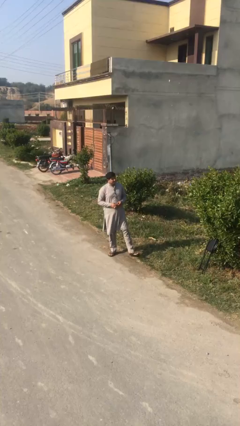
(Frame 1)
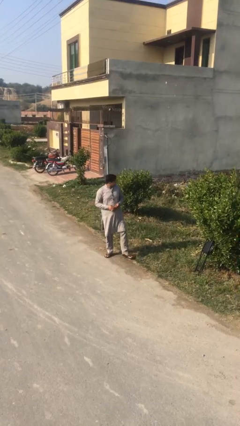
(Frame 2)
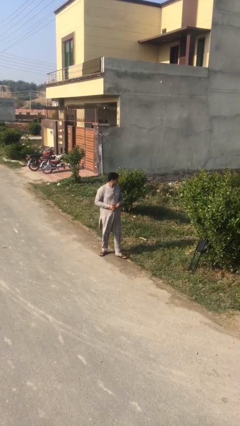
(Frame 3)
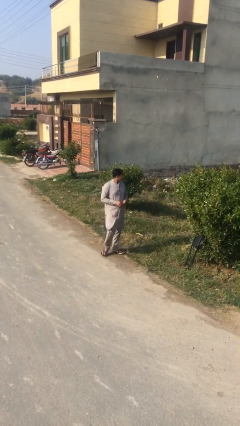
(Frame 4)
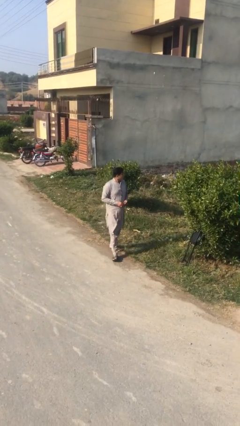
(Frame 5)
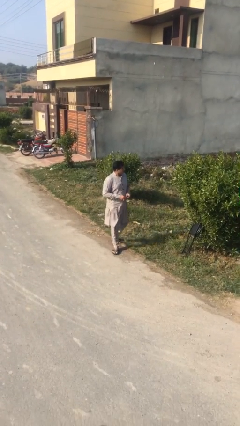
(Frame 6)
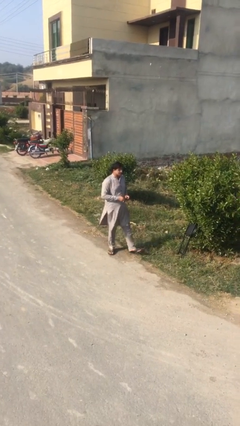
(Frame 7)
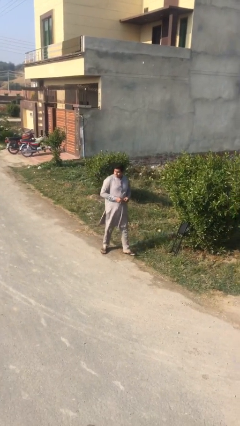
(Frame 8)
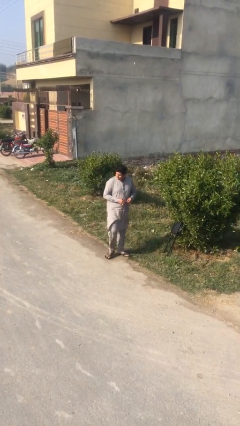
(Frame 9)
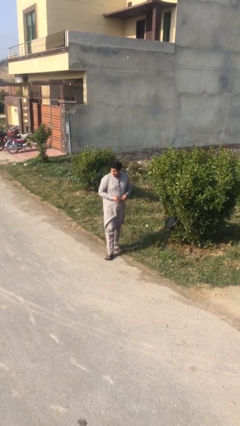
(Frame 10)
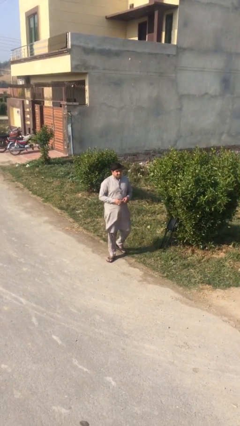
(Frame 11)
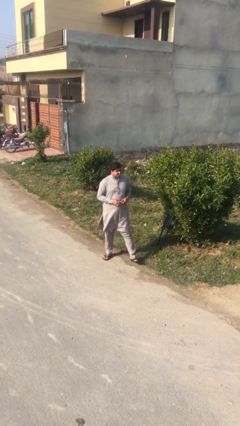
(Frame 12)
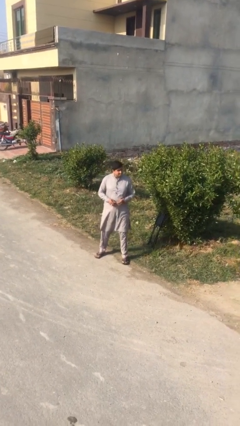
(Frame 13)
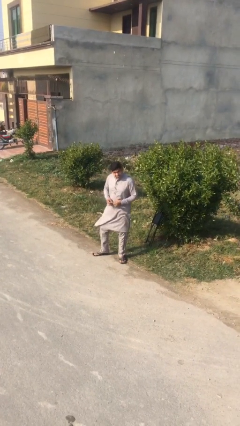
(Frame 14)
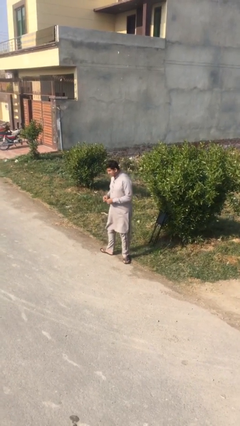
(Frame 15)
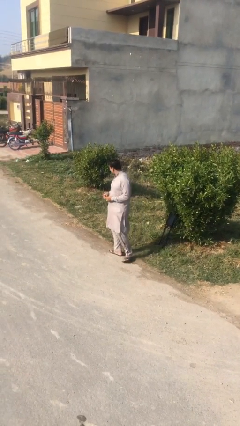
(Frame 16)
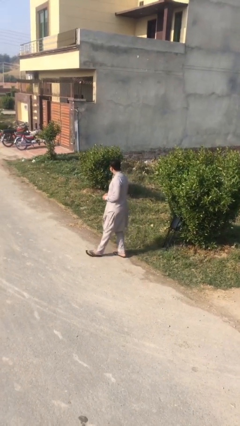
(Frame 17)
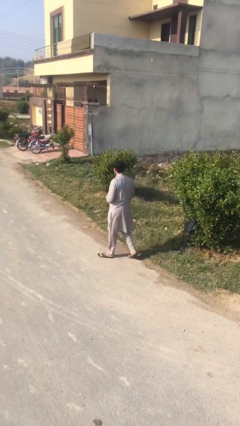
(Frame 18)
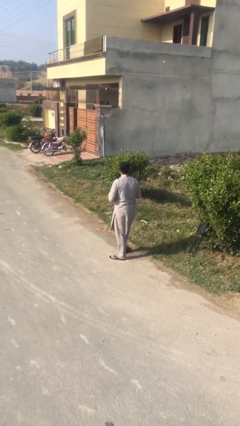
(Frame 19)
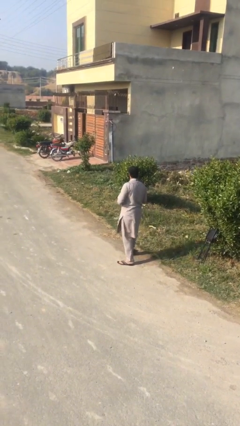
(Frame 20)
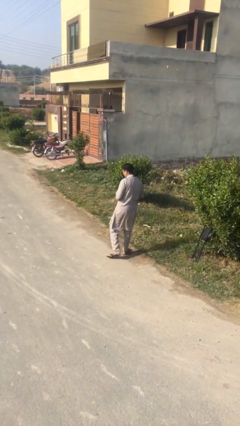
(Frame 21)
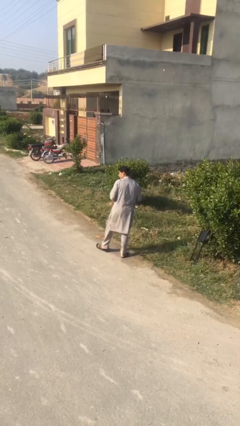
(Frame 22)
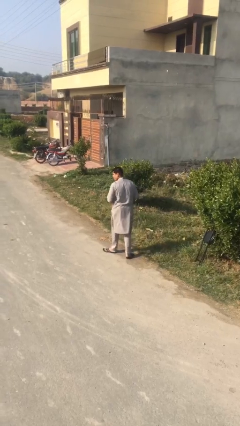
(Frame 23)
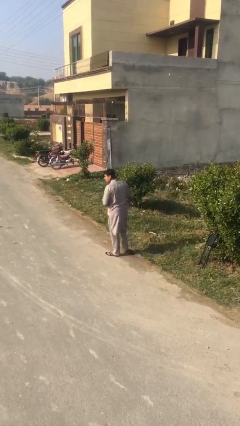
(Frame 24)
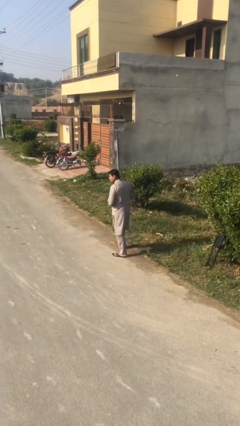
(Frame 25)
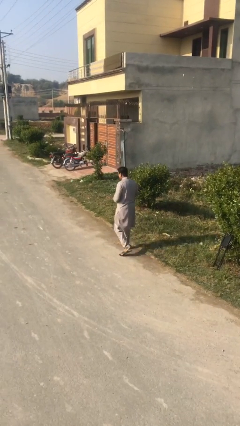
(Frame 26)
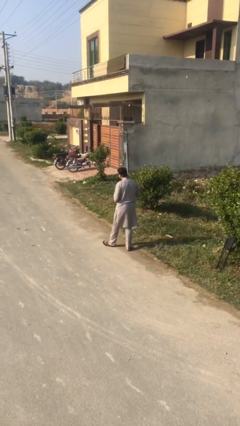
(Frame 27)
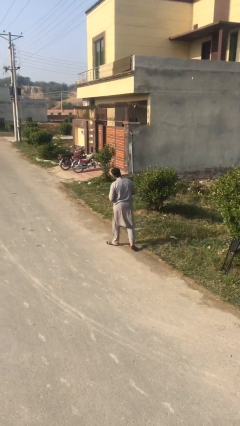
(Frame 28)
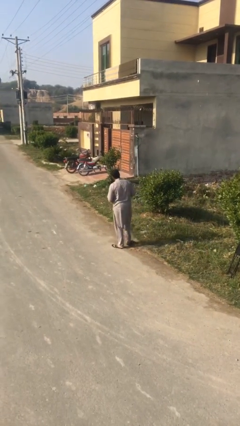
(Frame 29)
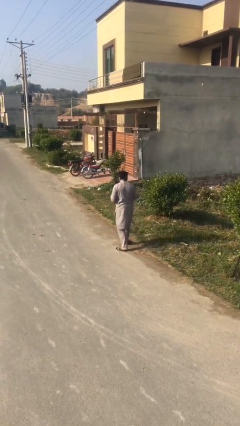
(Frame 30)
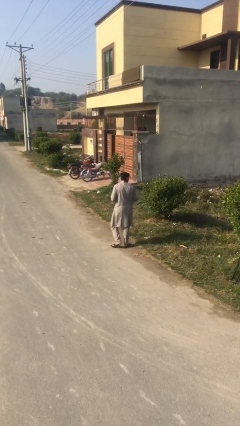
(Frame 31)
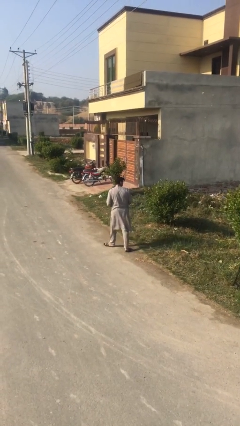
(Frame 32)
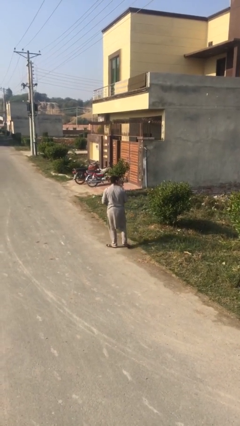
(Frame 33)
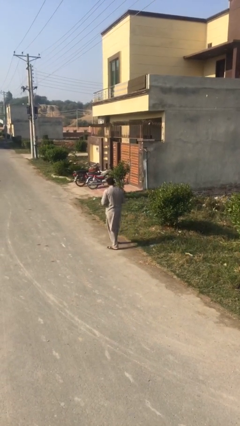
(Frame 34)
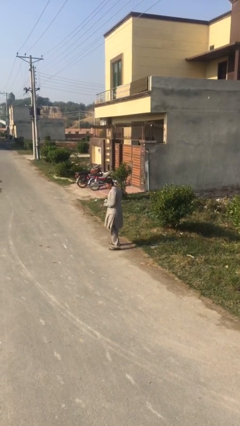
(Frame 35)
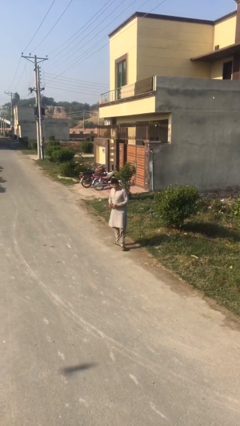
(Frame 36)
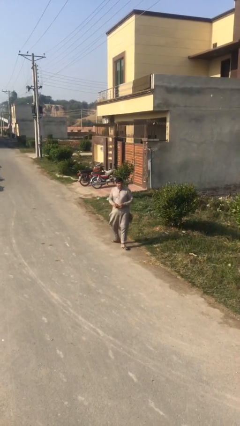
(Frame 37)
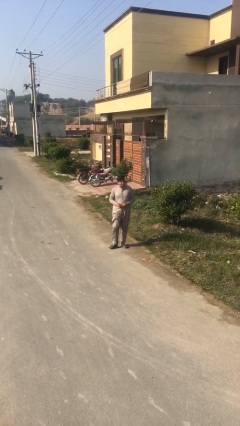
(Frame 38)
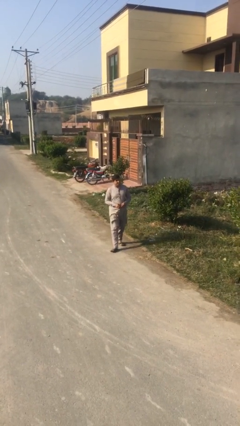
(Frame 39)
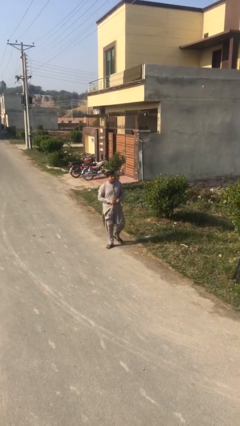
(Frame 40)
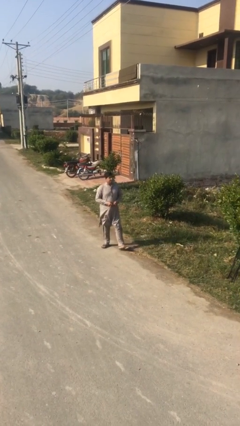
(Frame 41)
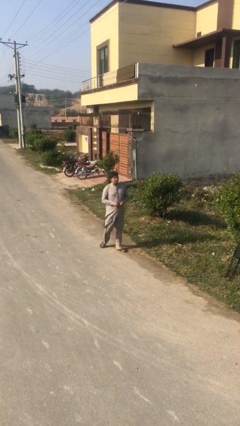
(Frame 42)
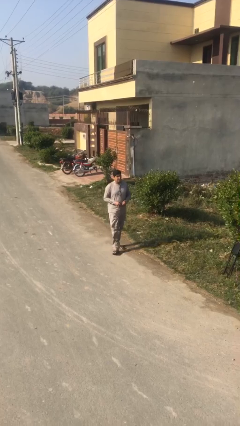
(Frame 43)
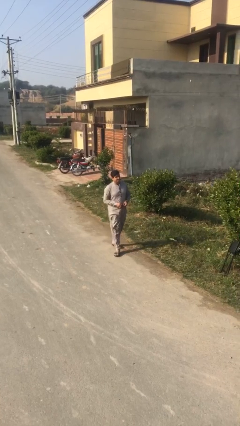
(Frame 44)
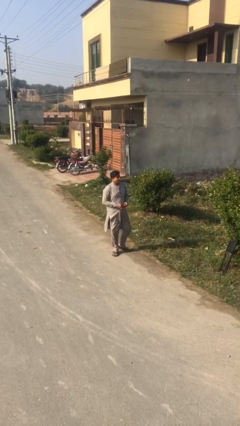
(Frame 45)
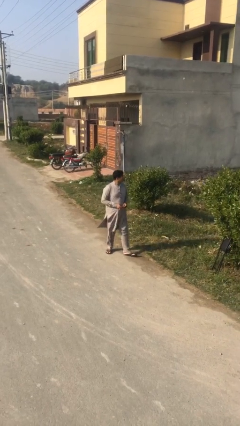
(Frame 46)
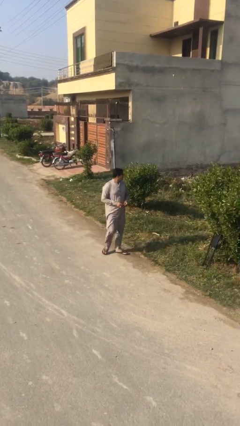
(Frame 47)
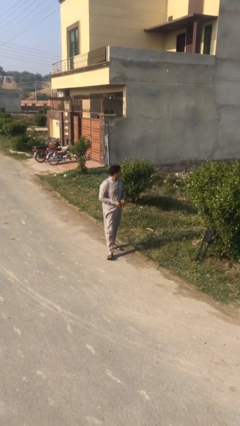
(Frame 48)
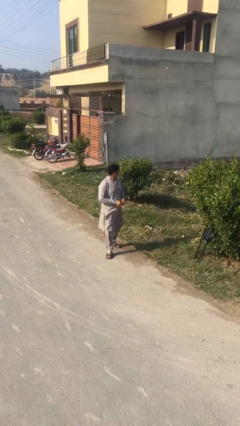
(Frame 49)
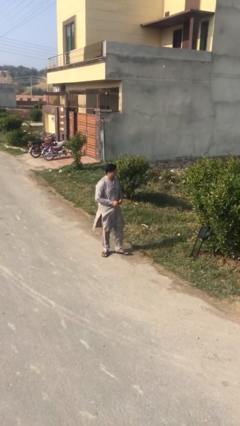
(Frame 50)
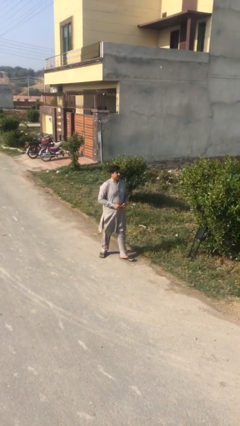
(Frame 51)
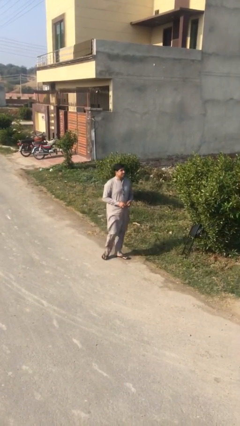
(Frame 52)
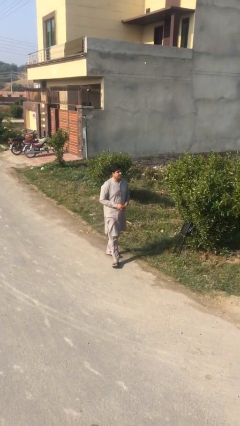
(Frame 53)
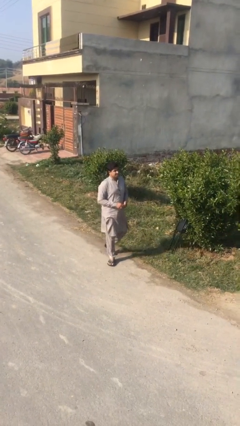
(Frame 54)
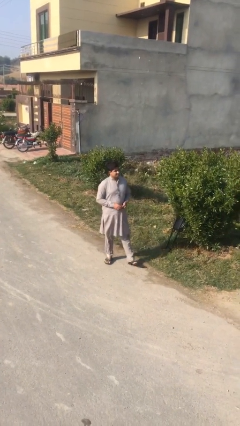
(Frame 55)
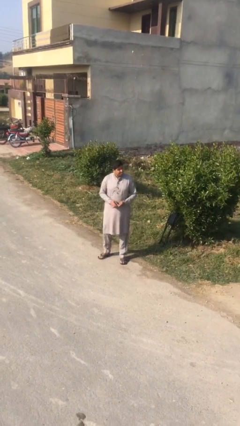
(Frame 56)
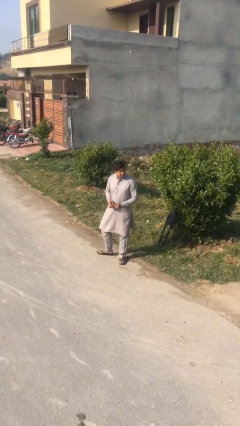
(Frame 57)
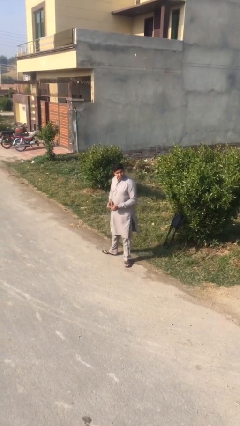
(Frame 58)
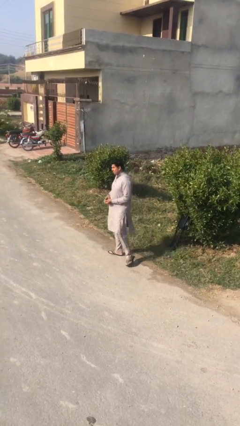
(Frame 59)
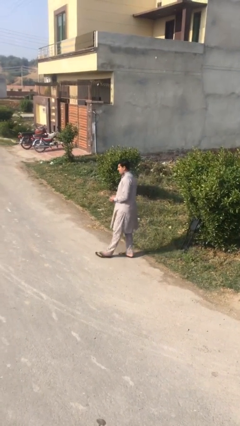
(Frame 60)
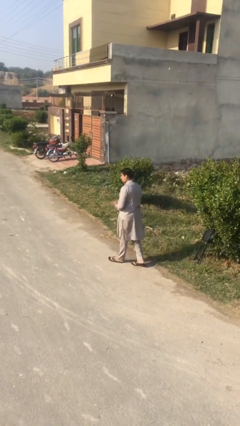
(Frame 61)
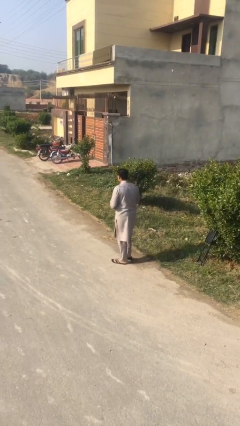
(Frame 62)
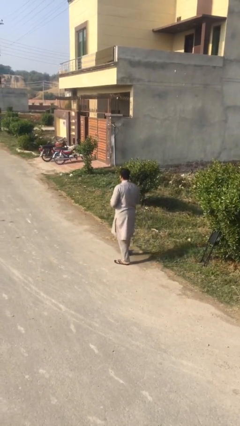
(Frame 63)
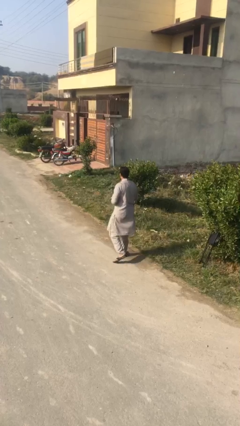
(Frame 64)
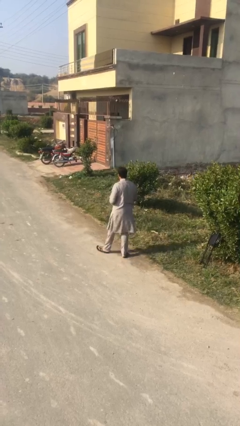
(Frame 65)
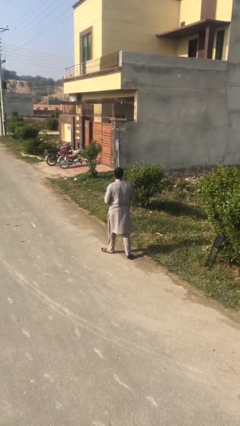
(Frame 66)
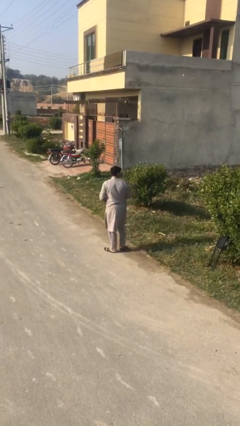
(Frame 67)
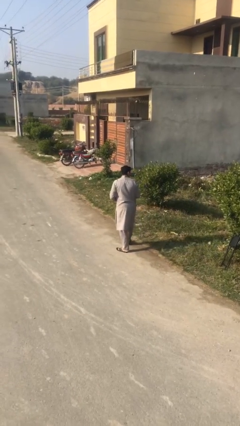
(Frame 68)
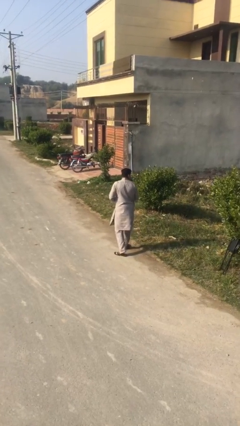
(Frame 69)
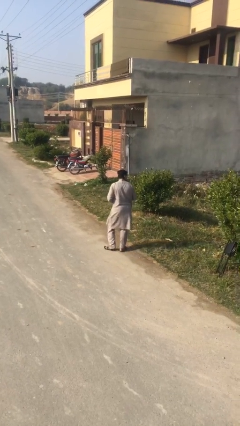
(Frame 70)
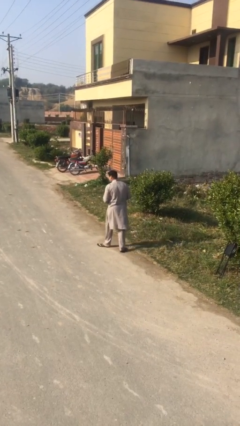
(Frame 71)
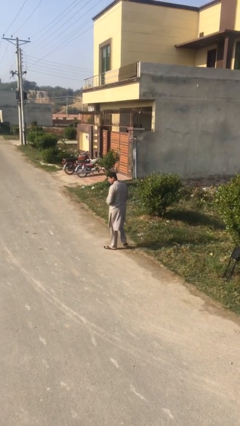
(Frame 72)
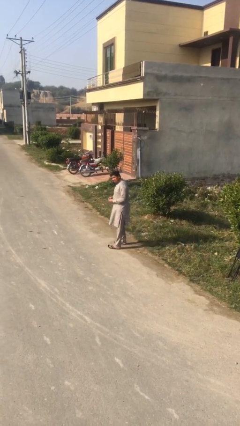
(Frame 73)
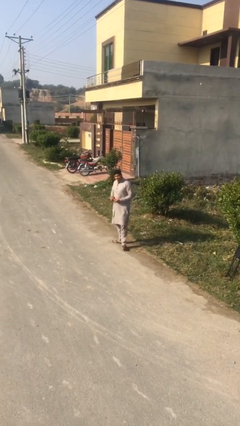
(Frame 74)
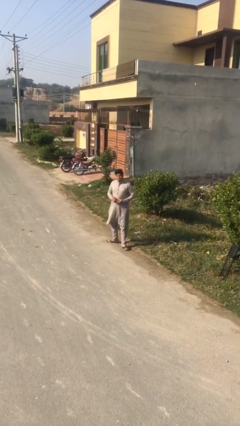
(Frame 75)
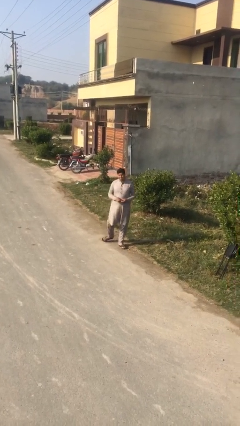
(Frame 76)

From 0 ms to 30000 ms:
person walks

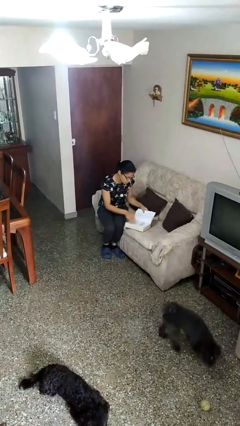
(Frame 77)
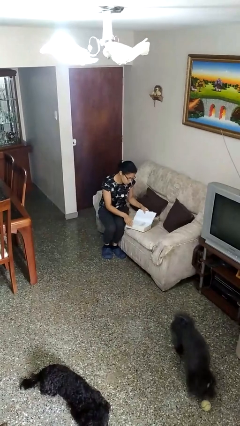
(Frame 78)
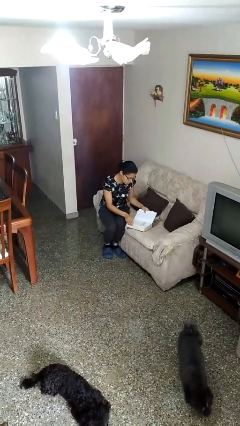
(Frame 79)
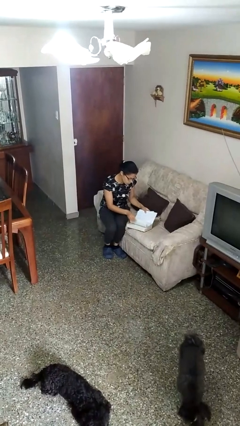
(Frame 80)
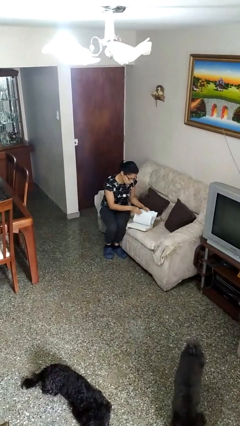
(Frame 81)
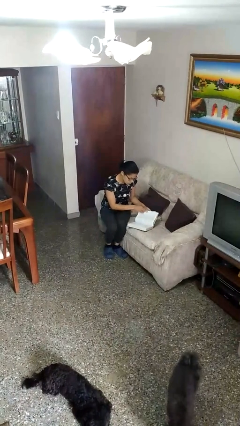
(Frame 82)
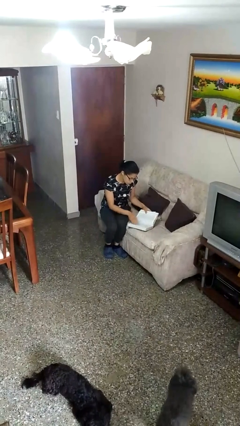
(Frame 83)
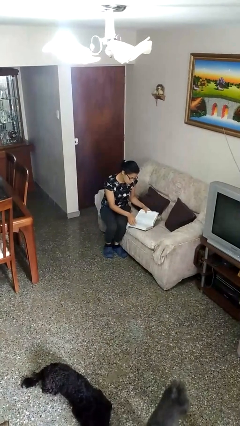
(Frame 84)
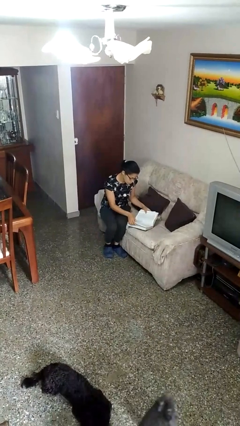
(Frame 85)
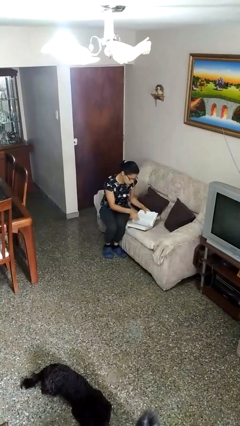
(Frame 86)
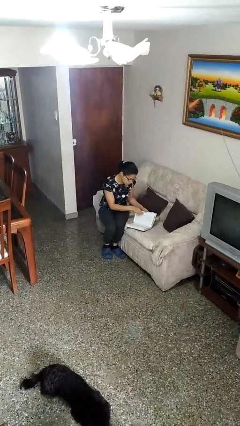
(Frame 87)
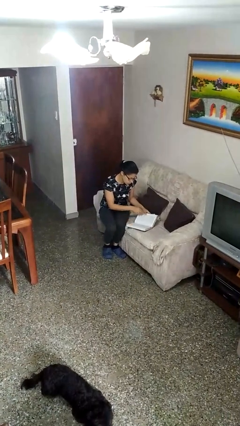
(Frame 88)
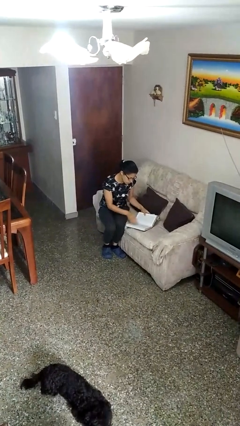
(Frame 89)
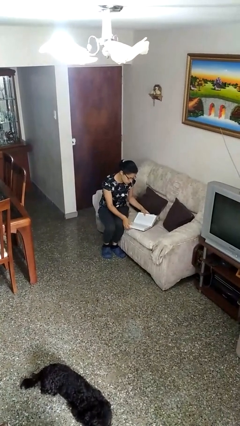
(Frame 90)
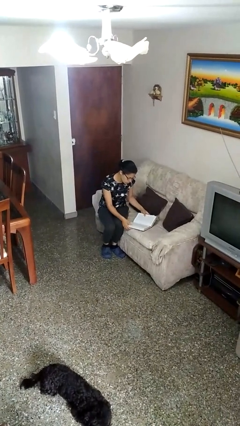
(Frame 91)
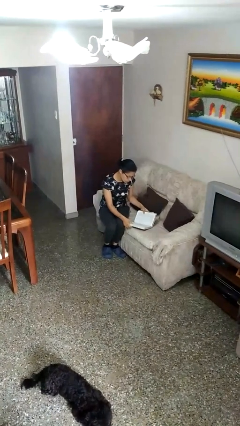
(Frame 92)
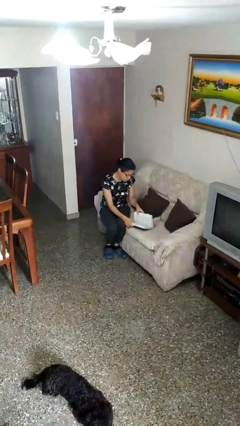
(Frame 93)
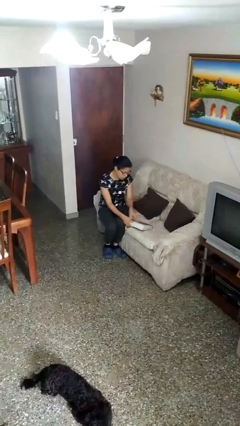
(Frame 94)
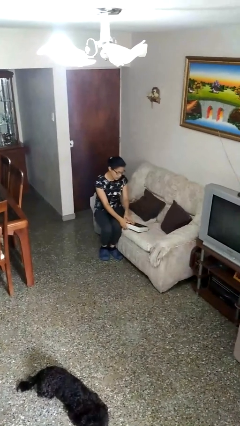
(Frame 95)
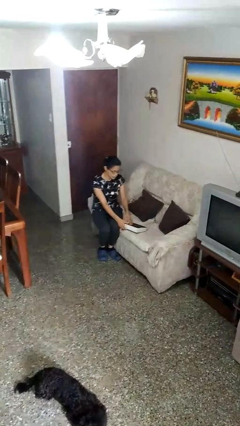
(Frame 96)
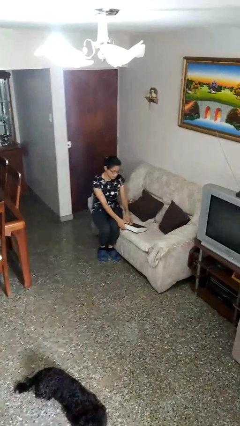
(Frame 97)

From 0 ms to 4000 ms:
person reads book
